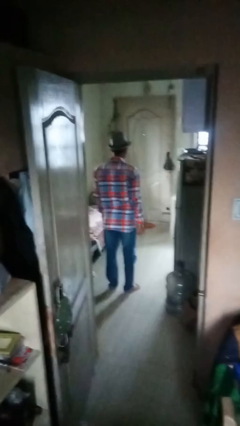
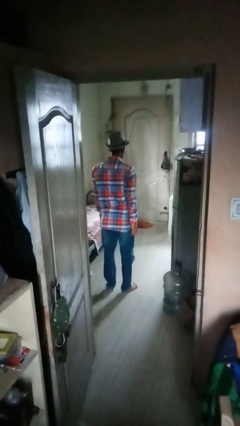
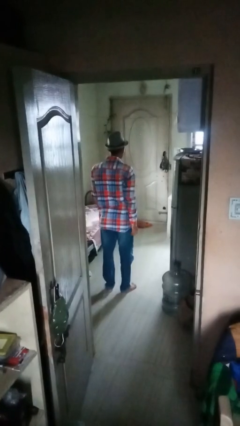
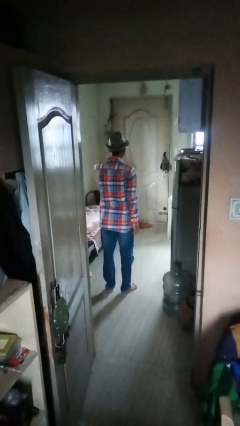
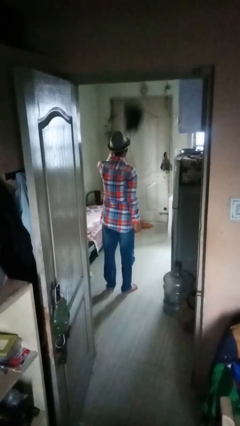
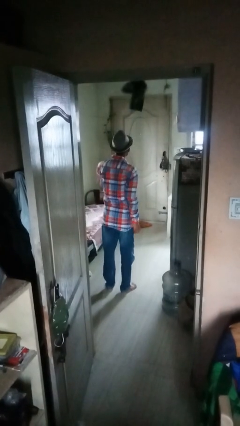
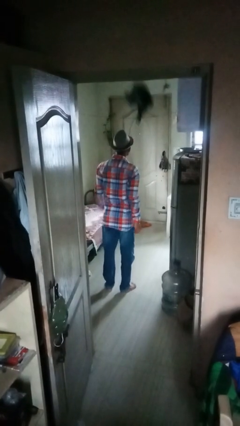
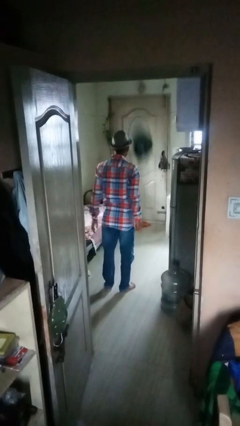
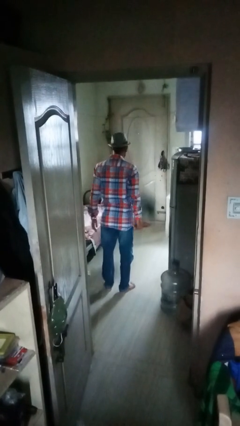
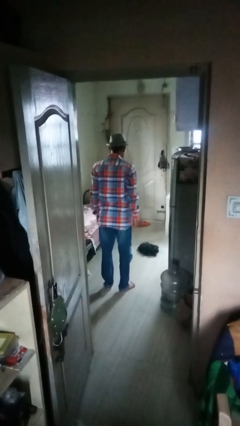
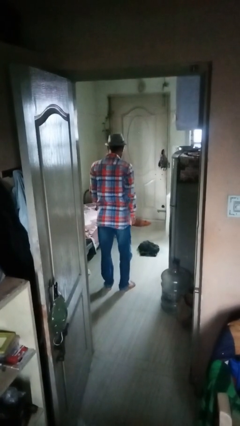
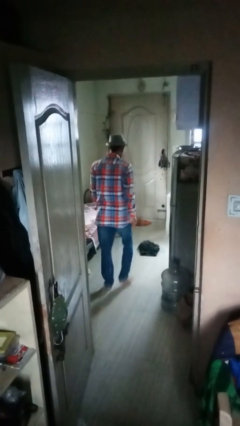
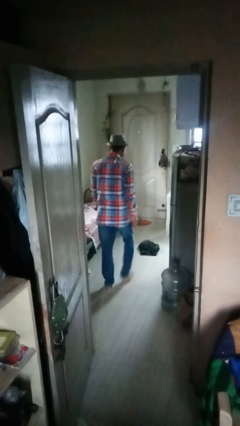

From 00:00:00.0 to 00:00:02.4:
person throws object into air

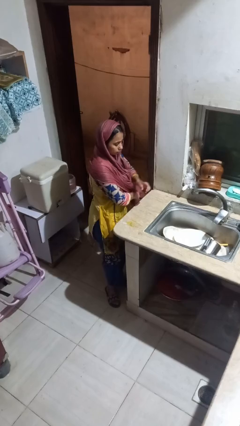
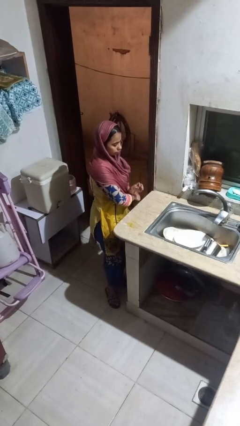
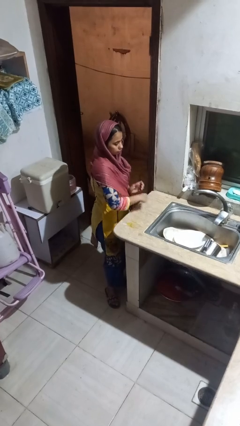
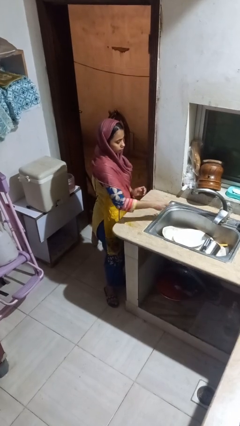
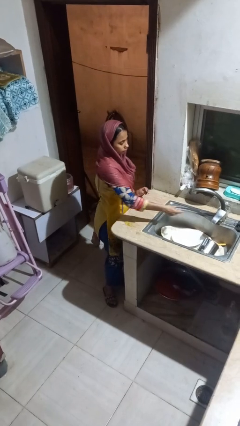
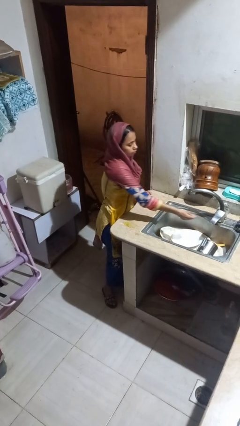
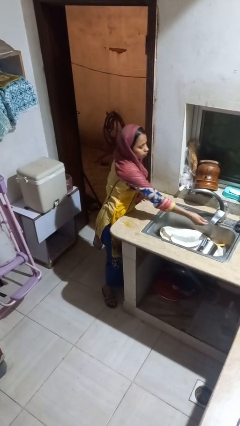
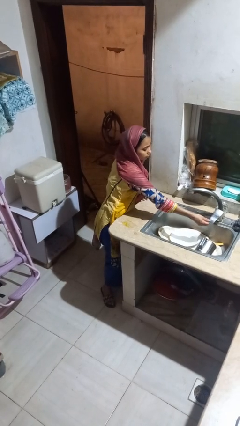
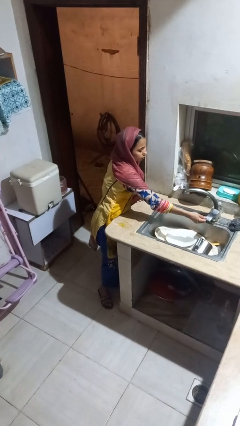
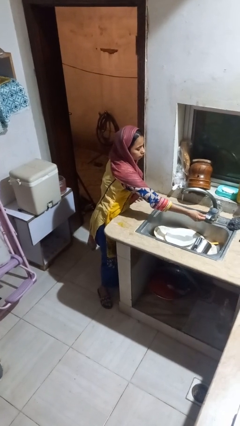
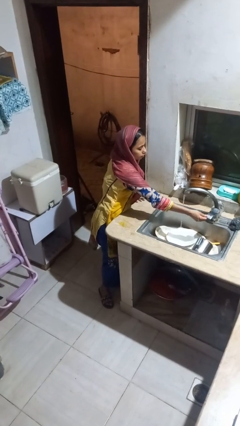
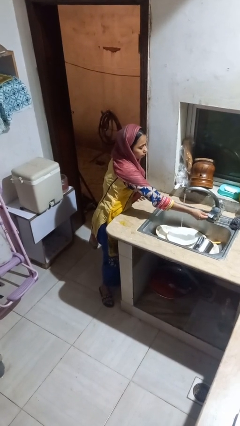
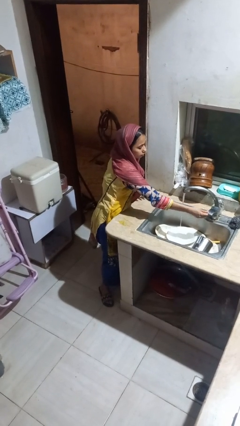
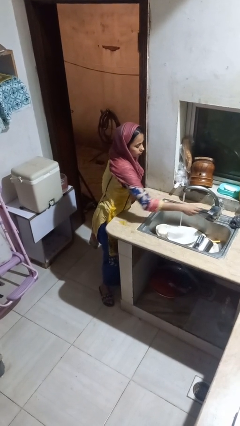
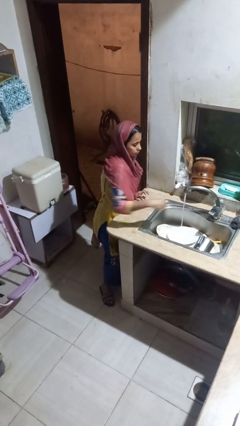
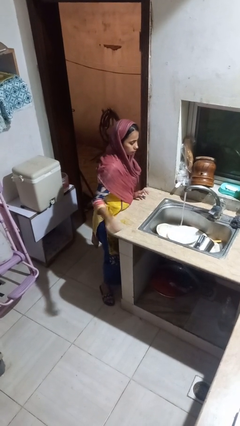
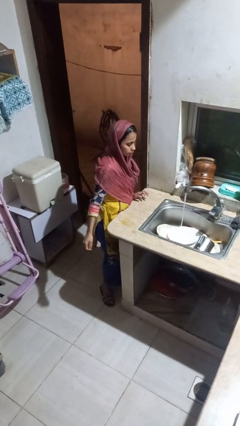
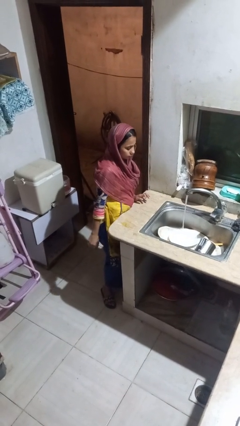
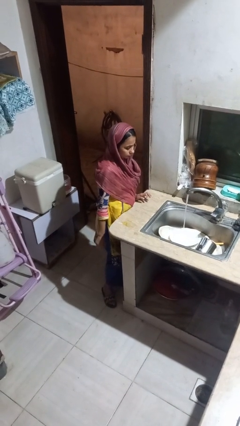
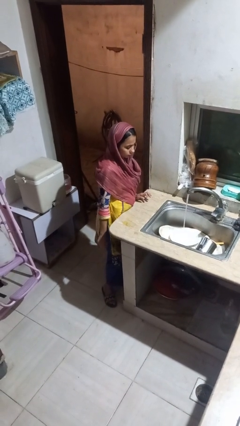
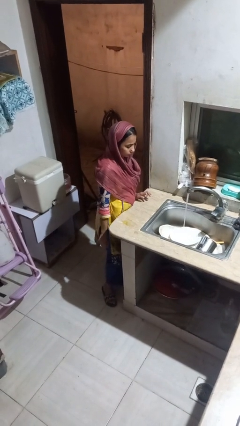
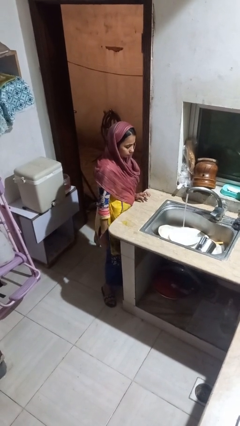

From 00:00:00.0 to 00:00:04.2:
person turns on faucet

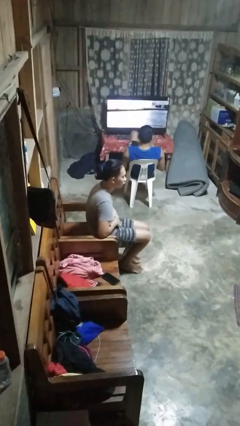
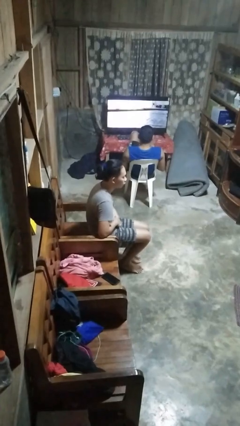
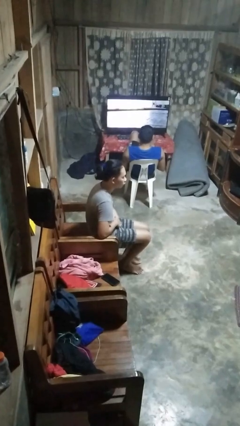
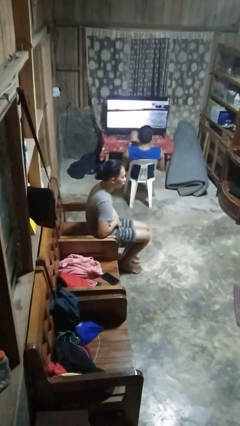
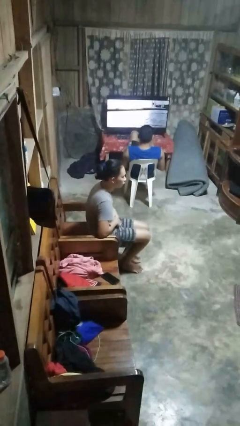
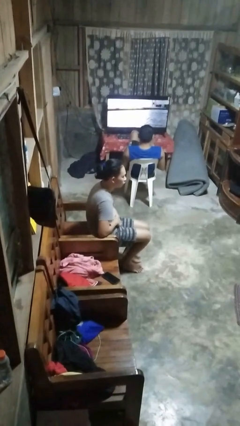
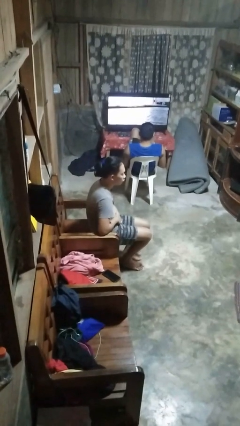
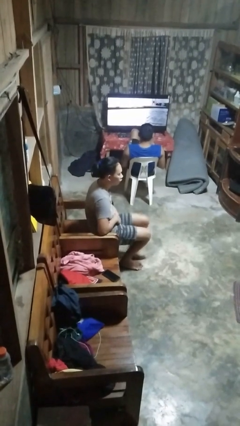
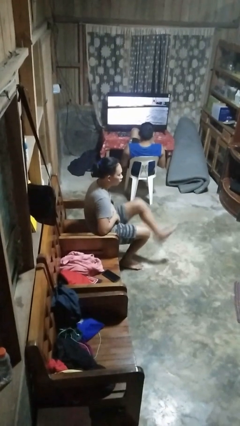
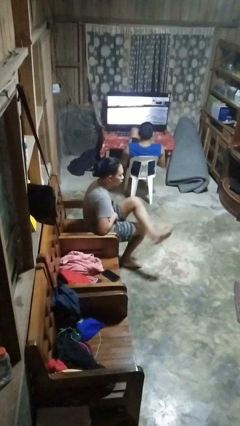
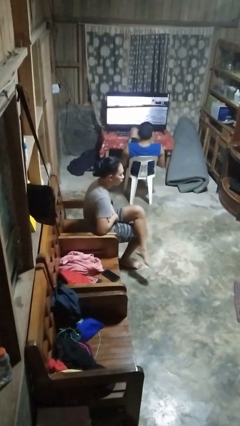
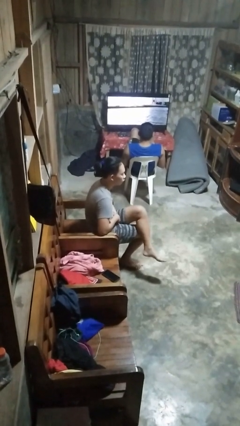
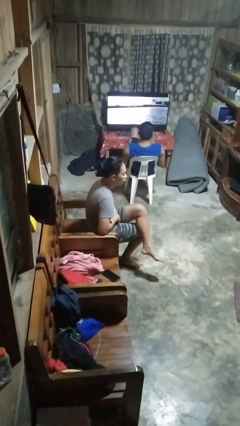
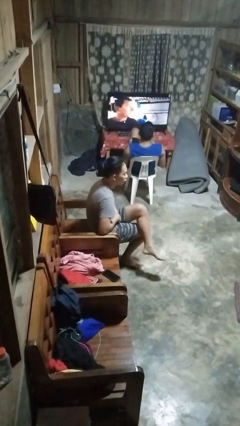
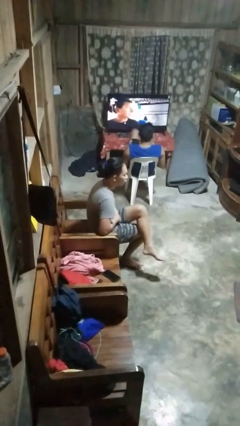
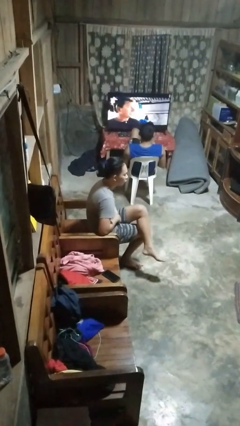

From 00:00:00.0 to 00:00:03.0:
person crosses legs

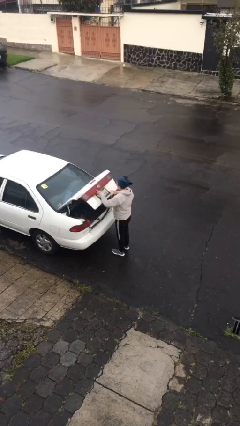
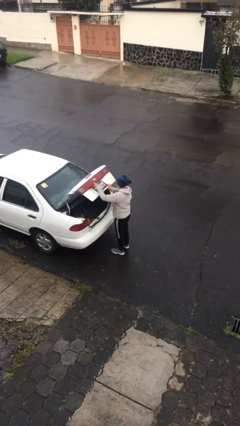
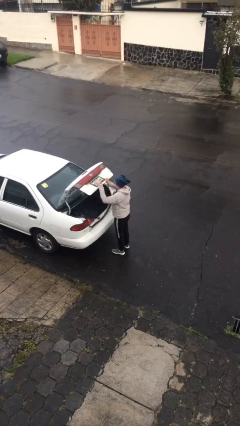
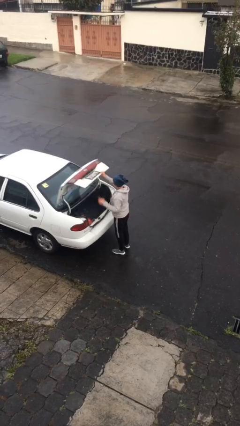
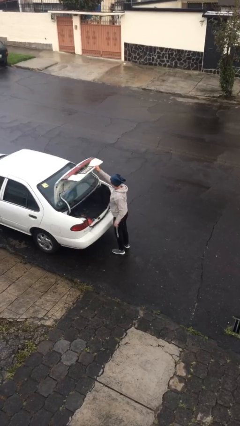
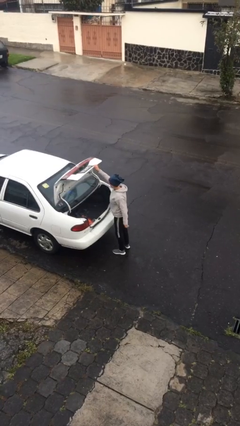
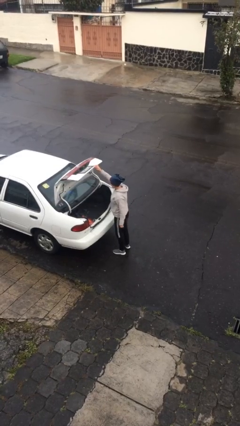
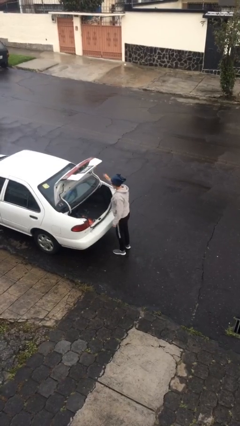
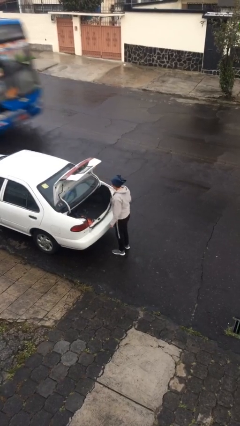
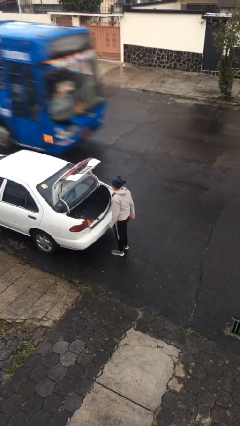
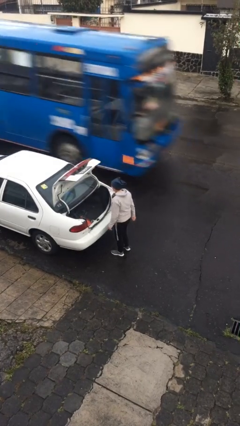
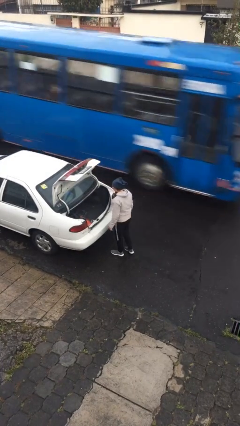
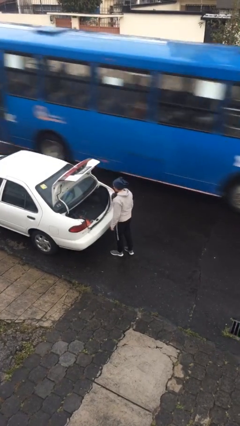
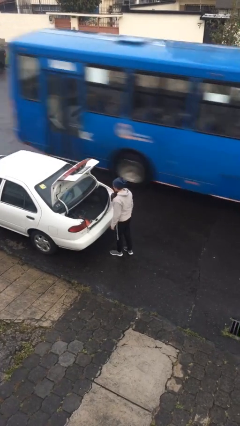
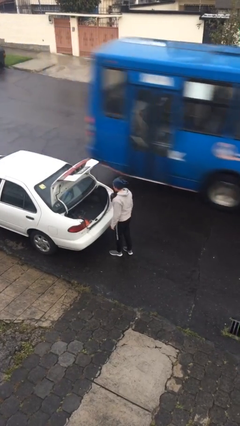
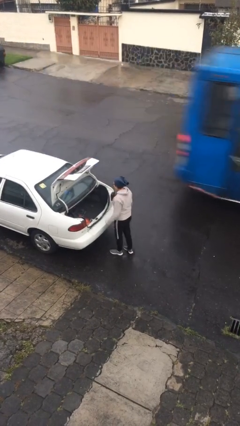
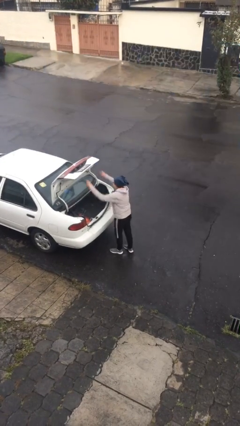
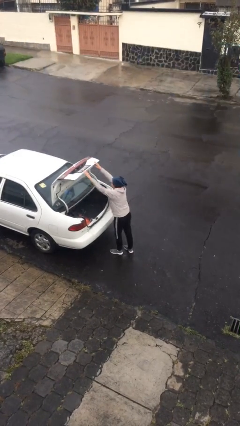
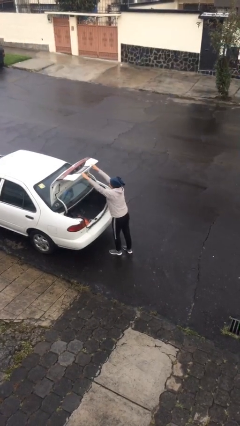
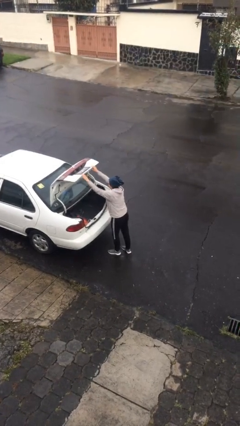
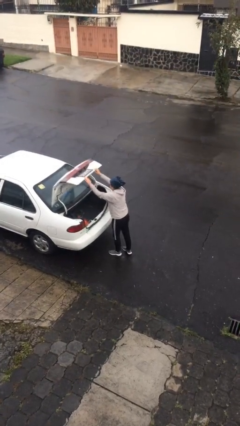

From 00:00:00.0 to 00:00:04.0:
person opens car trunk

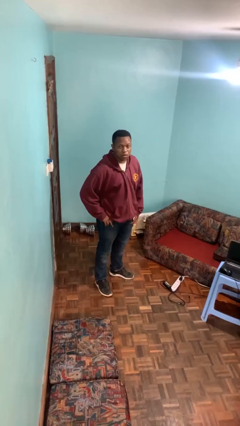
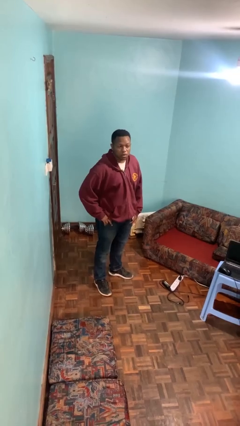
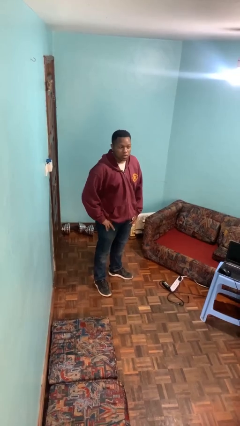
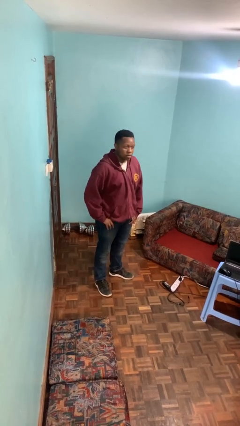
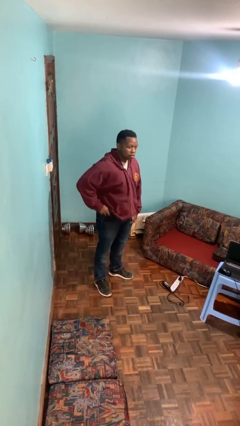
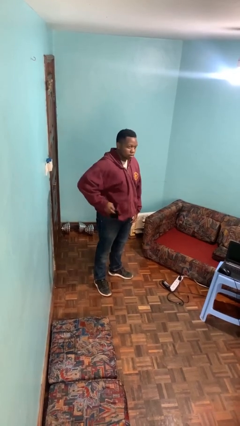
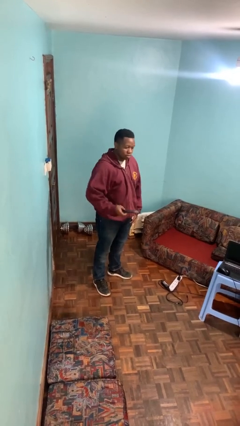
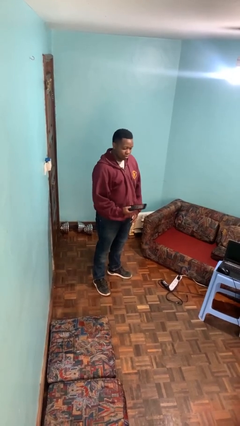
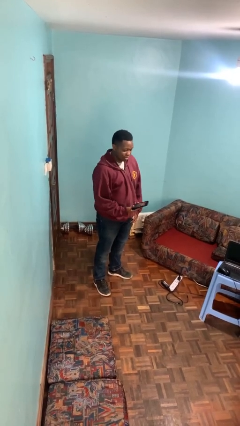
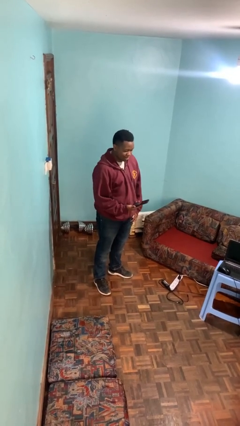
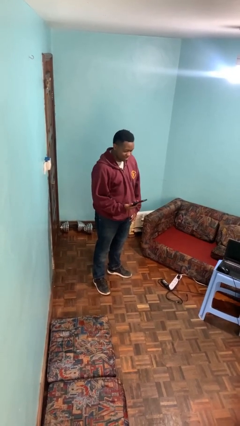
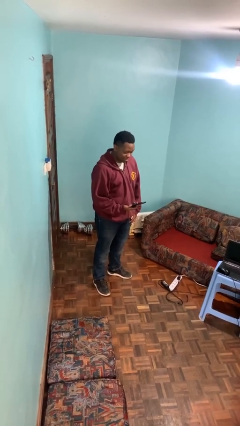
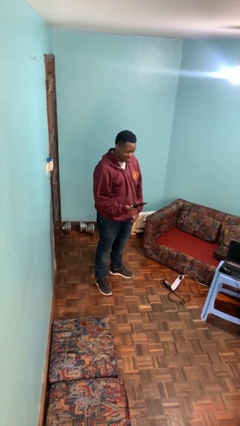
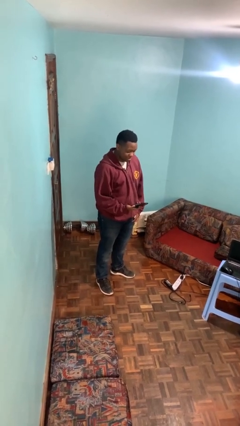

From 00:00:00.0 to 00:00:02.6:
person takes phone from pocket

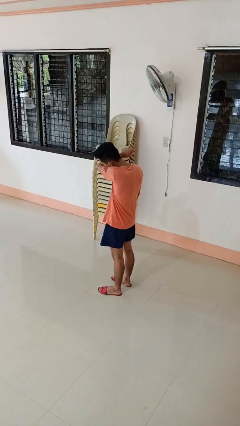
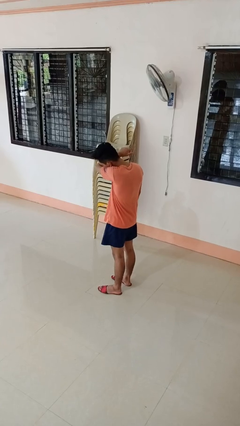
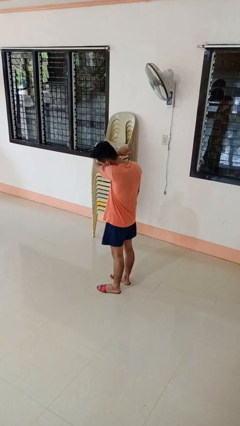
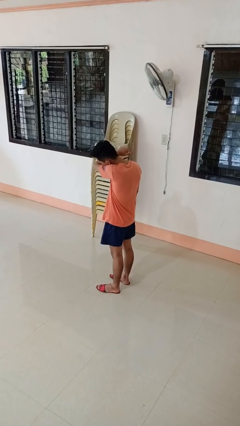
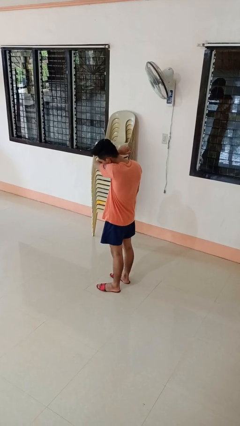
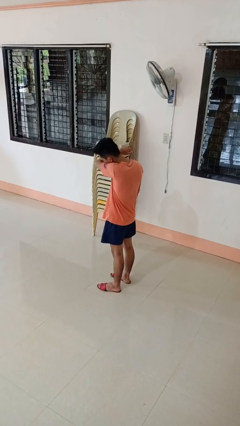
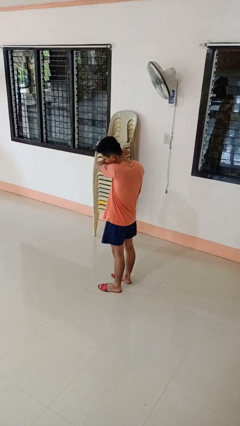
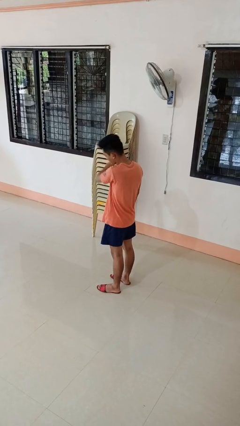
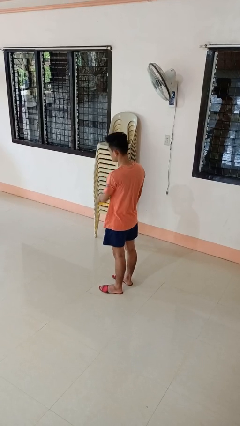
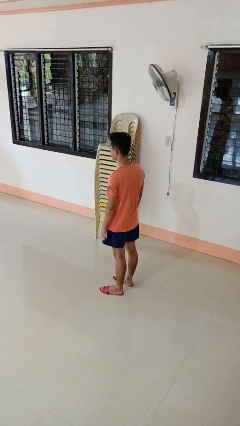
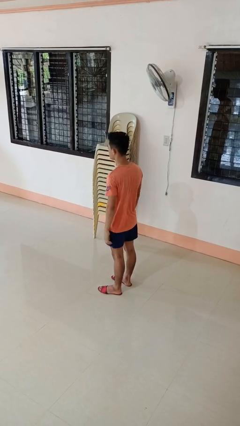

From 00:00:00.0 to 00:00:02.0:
person sneezes into arm
